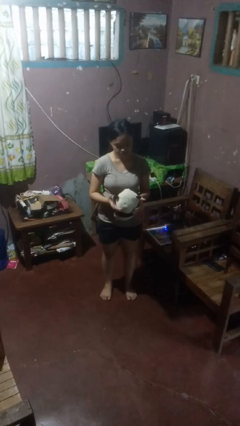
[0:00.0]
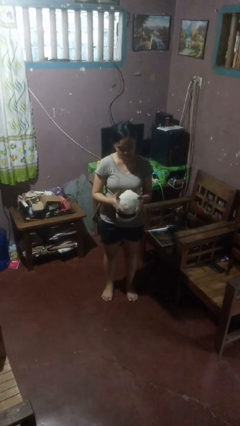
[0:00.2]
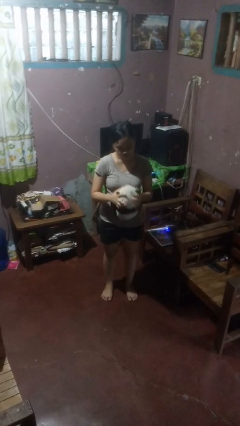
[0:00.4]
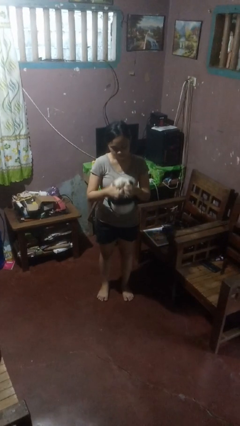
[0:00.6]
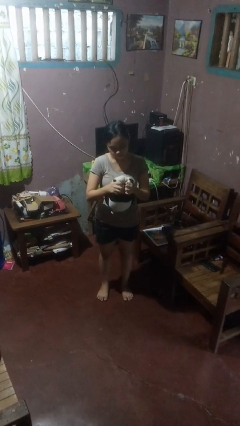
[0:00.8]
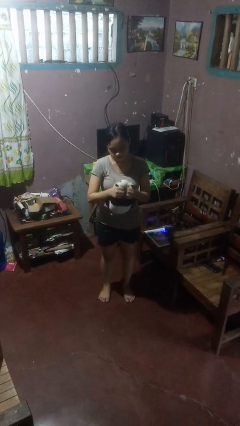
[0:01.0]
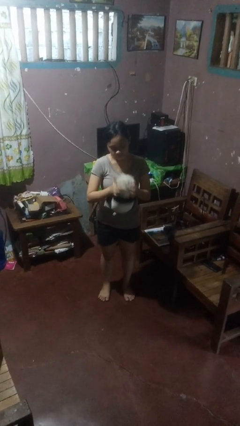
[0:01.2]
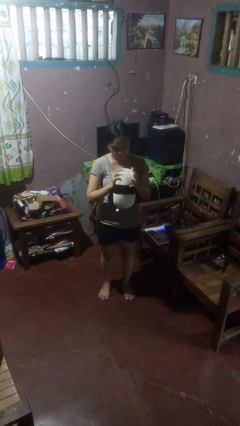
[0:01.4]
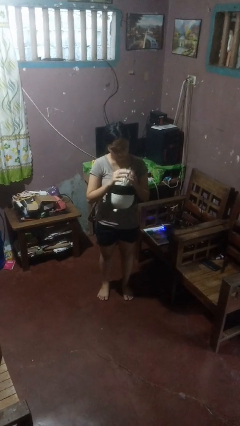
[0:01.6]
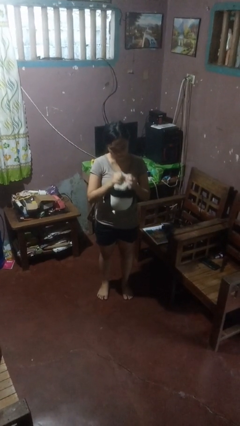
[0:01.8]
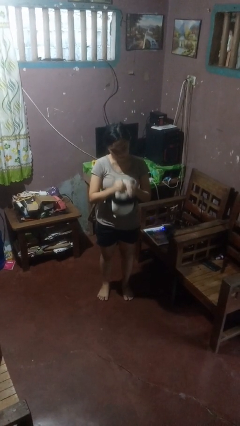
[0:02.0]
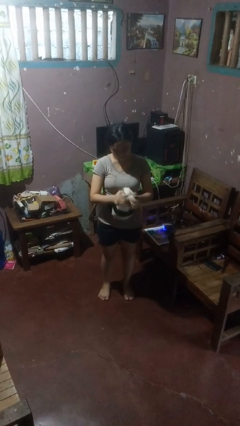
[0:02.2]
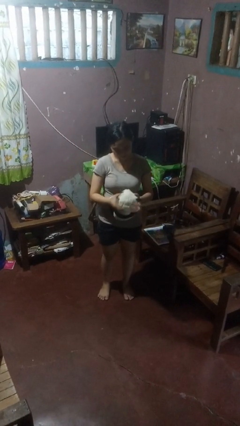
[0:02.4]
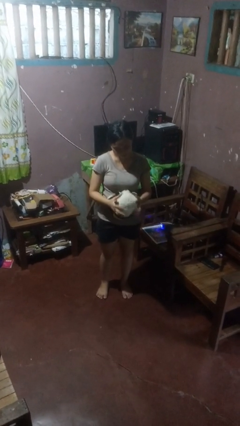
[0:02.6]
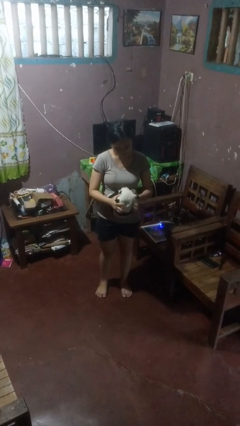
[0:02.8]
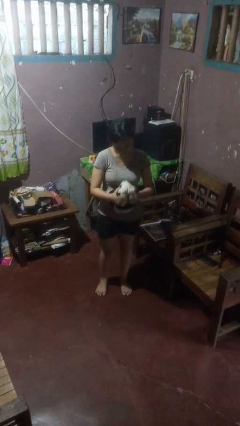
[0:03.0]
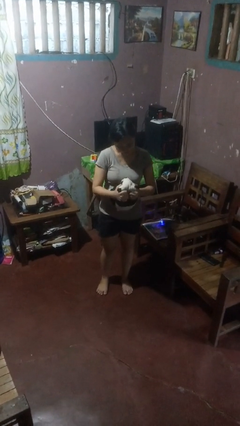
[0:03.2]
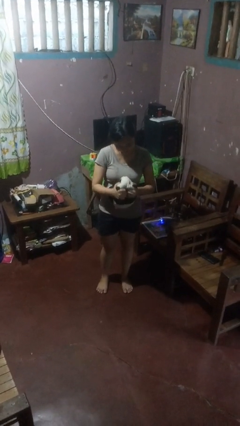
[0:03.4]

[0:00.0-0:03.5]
person squeezes object

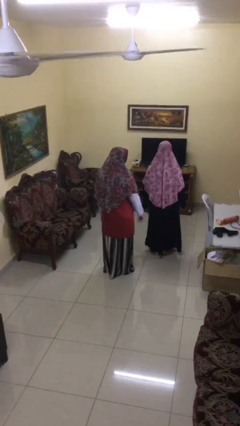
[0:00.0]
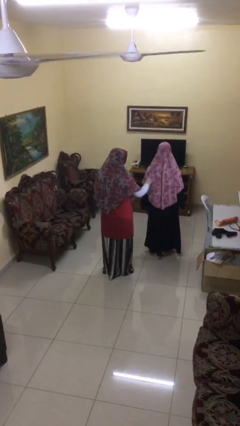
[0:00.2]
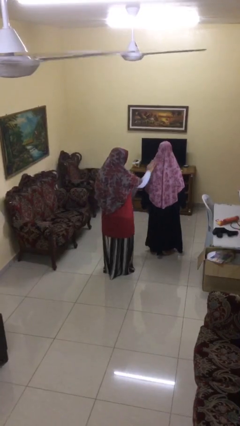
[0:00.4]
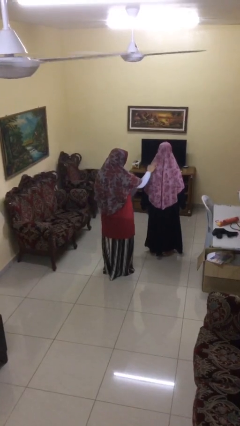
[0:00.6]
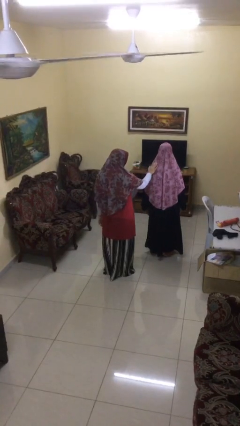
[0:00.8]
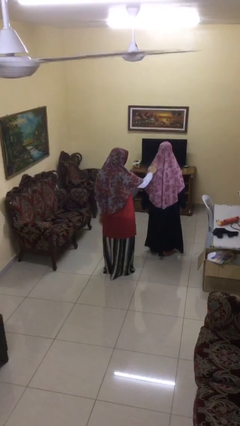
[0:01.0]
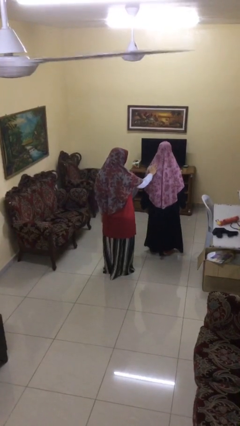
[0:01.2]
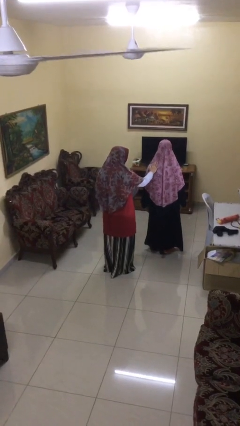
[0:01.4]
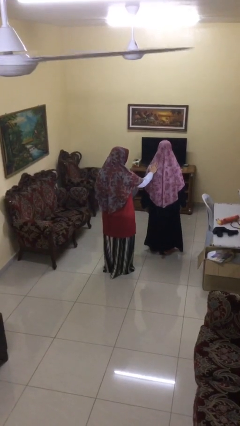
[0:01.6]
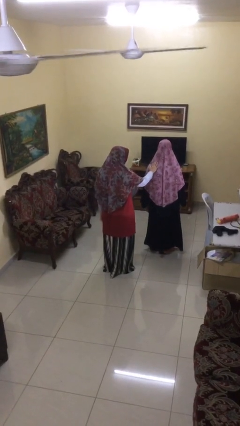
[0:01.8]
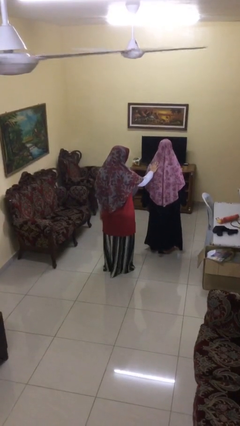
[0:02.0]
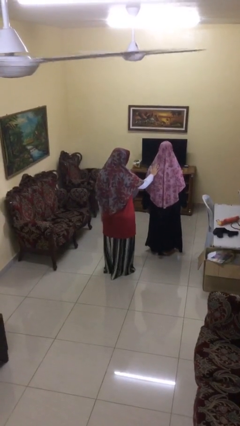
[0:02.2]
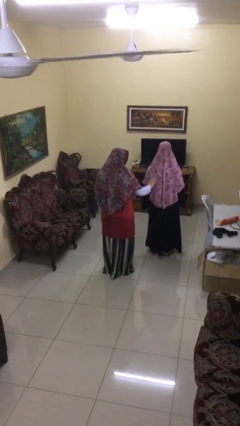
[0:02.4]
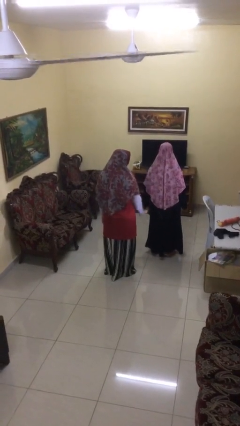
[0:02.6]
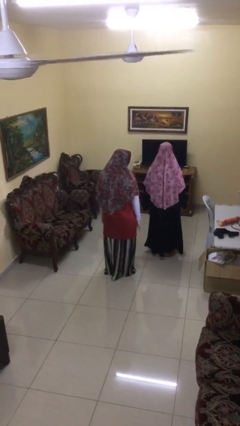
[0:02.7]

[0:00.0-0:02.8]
person touches back of person

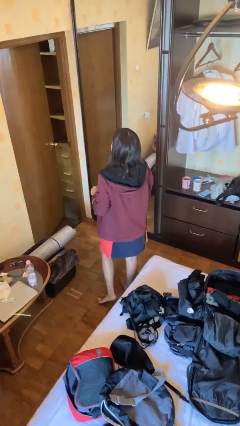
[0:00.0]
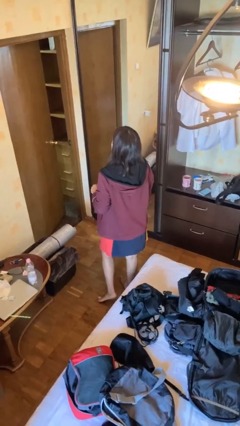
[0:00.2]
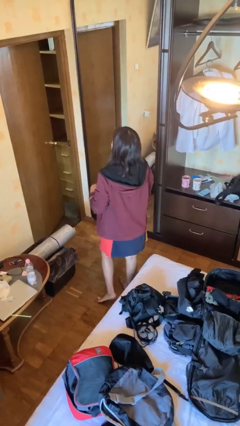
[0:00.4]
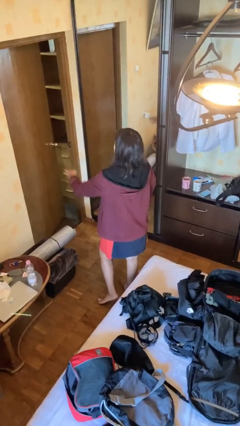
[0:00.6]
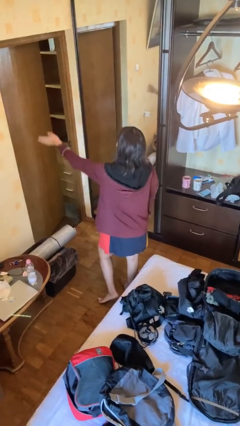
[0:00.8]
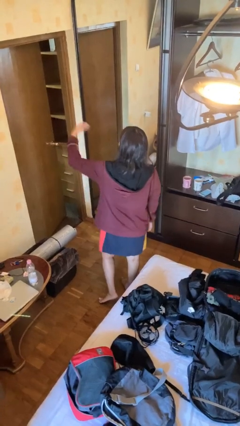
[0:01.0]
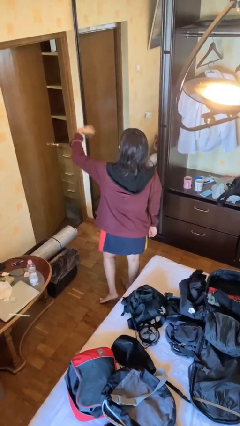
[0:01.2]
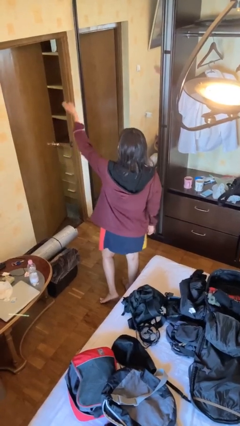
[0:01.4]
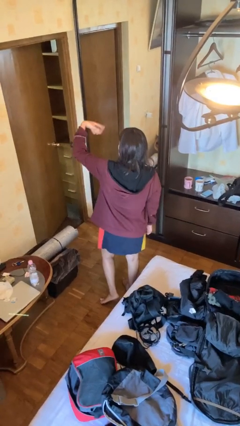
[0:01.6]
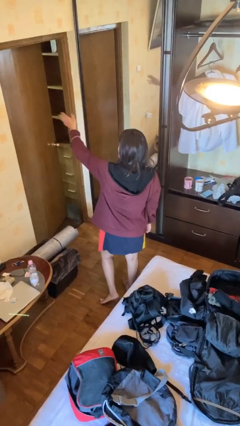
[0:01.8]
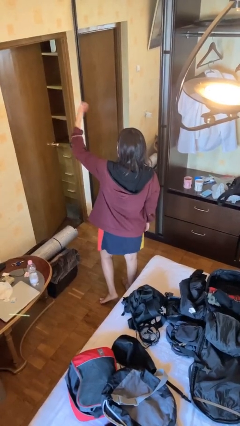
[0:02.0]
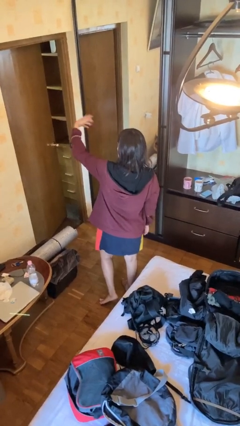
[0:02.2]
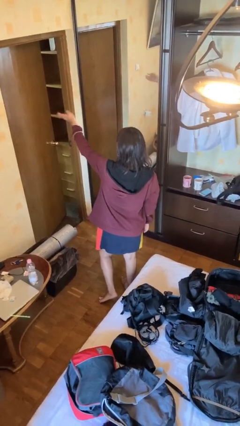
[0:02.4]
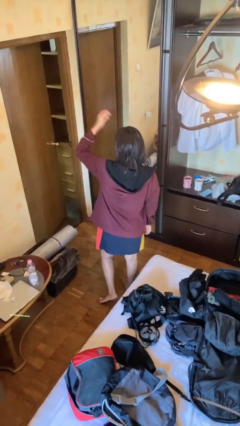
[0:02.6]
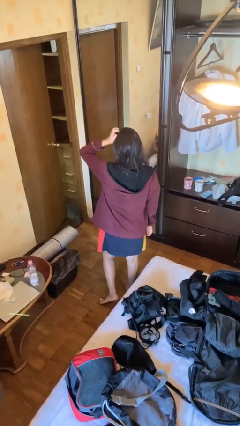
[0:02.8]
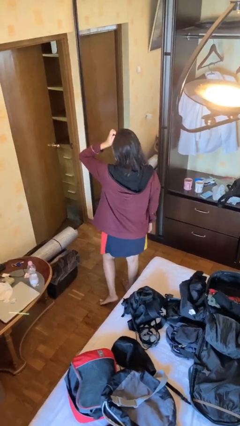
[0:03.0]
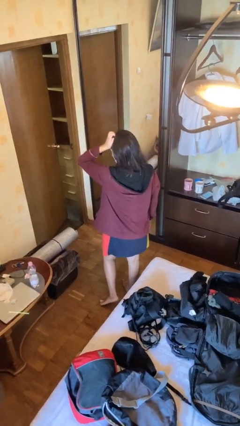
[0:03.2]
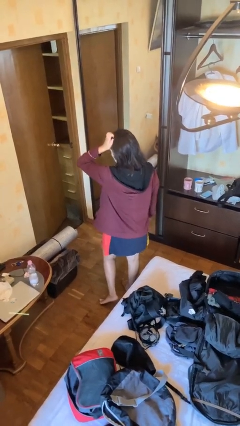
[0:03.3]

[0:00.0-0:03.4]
person gestures come here

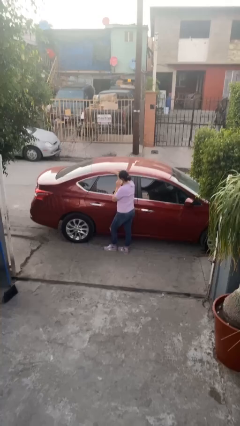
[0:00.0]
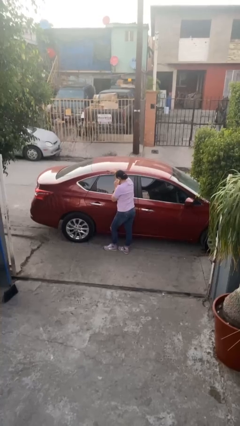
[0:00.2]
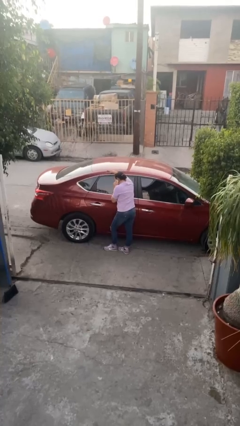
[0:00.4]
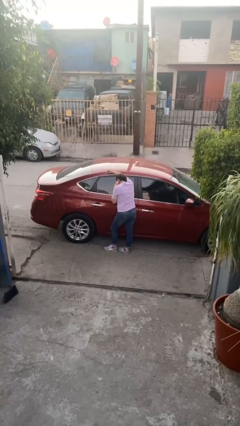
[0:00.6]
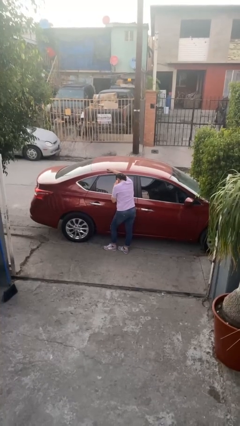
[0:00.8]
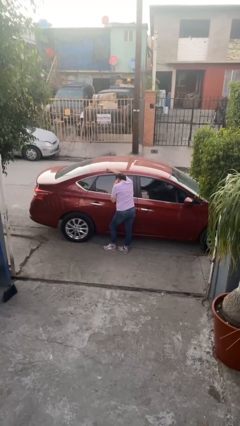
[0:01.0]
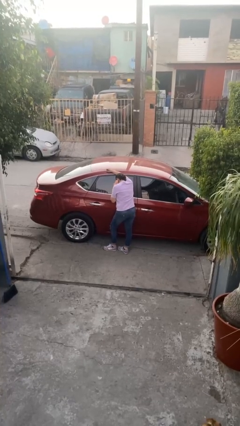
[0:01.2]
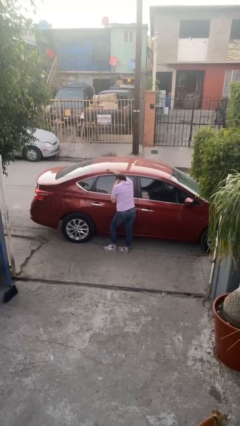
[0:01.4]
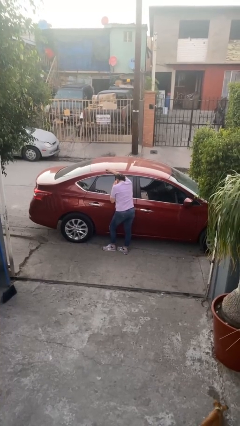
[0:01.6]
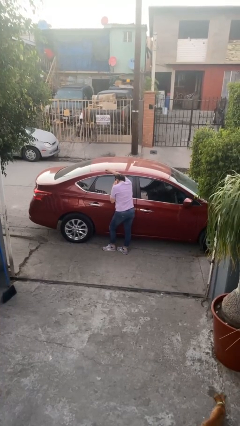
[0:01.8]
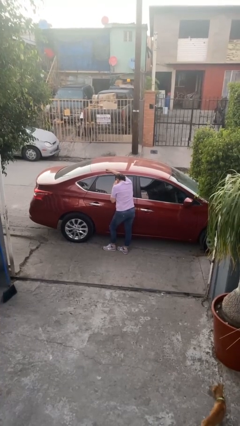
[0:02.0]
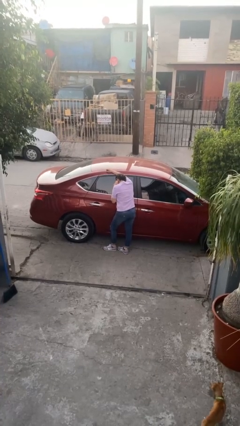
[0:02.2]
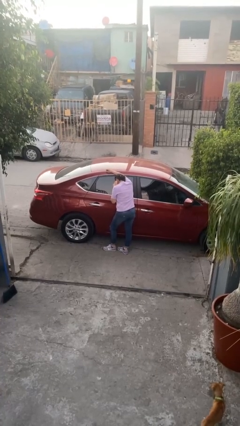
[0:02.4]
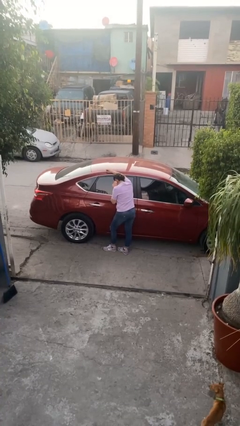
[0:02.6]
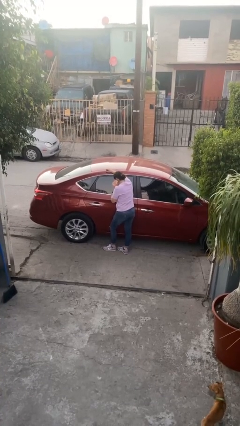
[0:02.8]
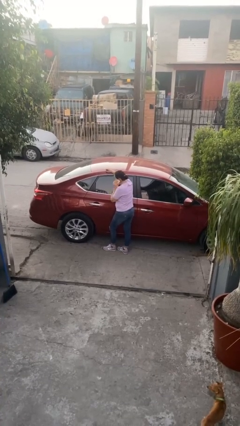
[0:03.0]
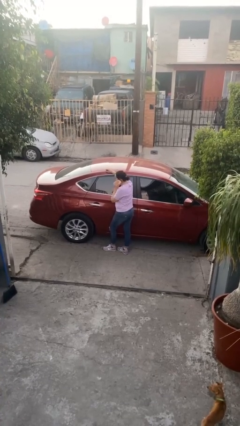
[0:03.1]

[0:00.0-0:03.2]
person leans against car

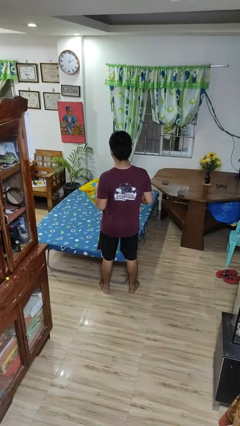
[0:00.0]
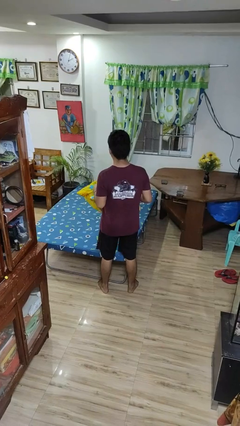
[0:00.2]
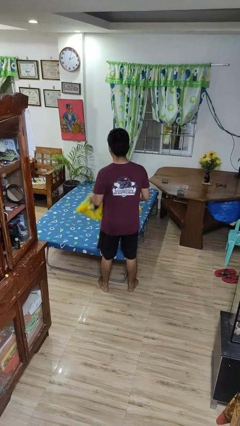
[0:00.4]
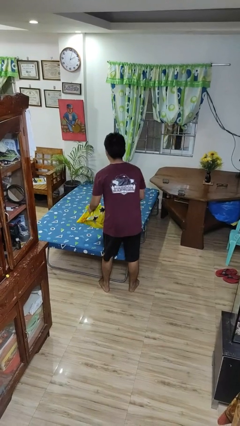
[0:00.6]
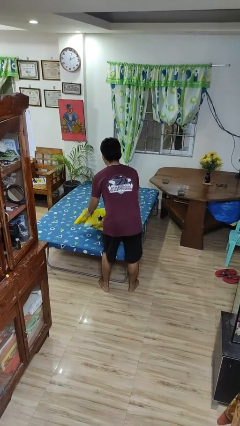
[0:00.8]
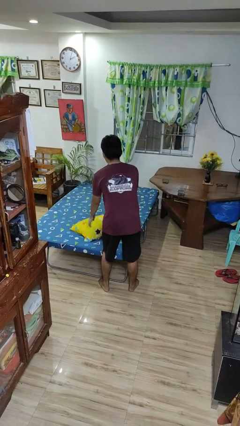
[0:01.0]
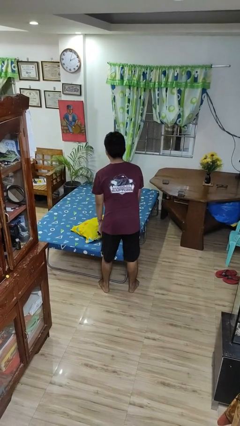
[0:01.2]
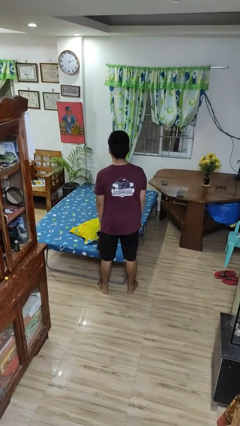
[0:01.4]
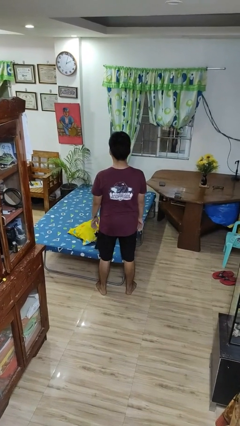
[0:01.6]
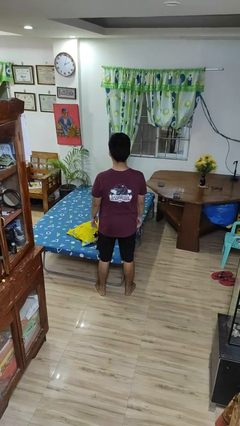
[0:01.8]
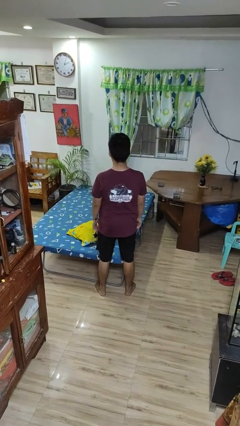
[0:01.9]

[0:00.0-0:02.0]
person puts down object on bed

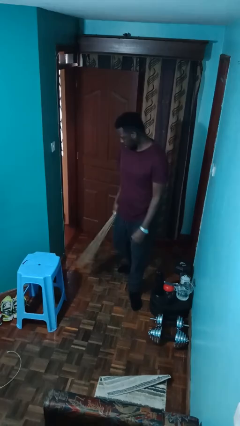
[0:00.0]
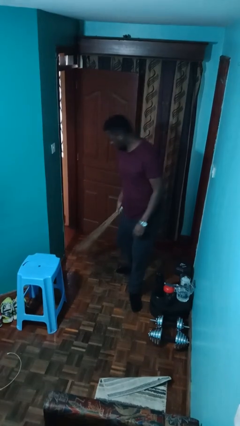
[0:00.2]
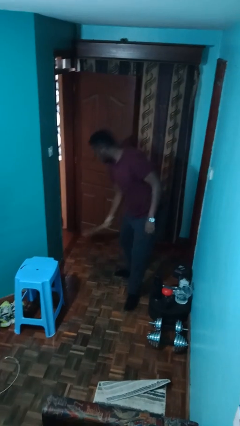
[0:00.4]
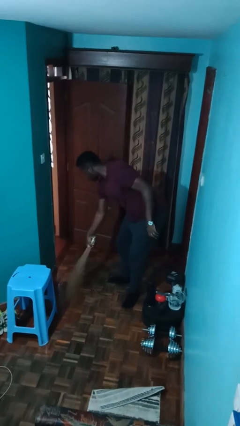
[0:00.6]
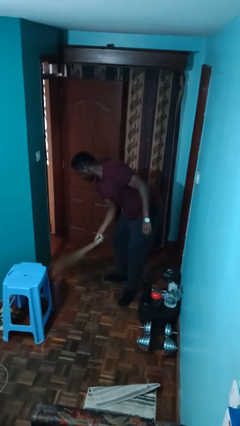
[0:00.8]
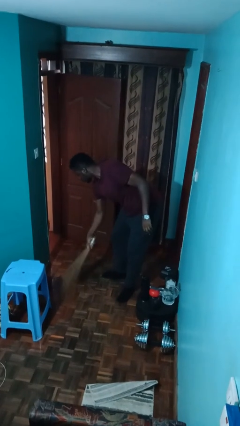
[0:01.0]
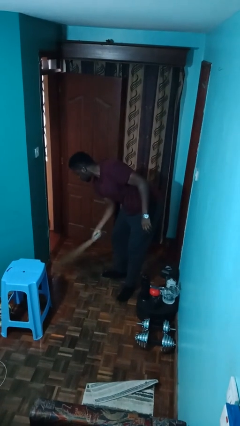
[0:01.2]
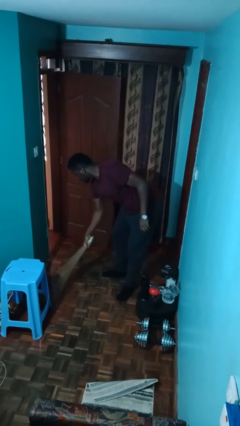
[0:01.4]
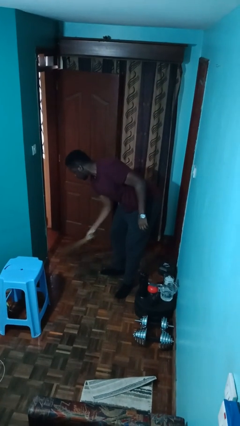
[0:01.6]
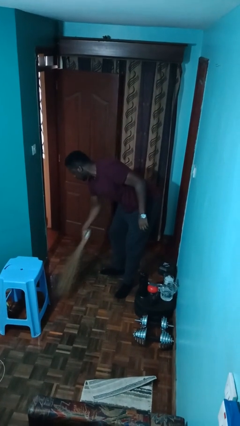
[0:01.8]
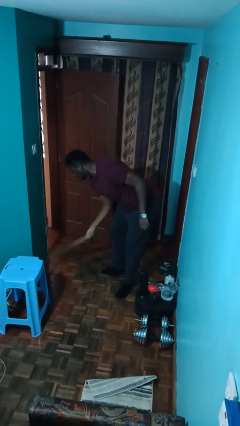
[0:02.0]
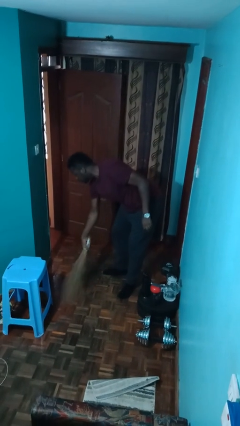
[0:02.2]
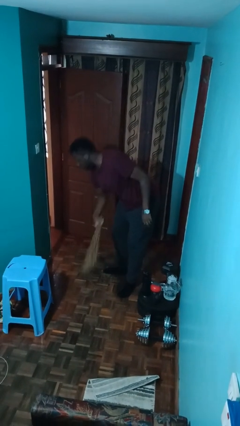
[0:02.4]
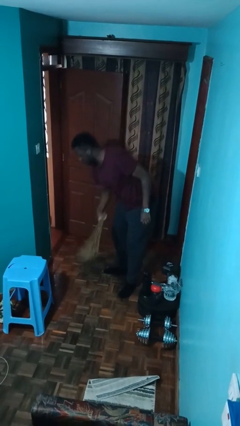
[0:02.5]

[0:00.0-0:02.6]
person sweeps floor
